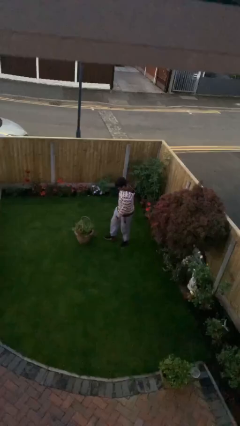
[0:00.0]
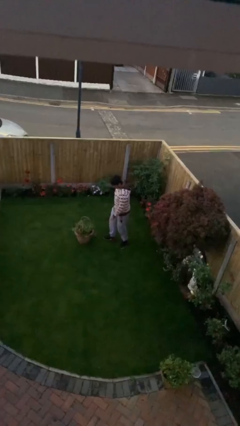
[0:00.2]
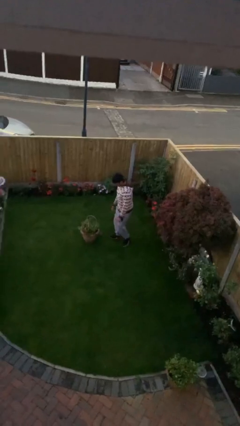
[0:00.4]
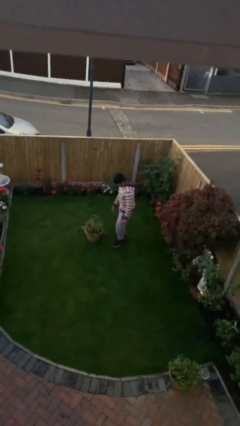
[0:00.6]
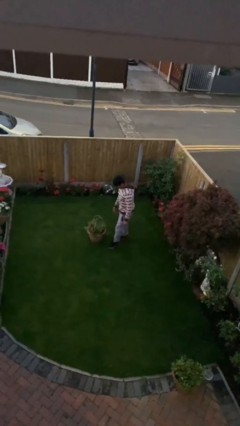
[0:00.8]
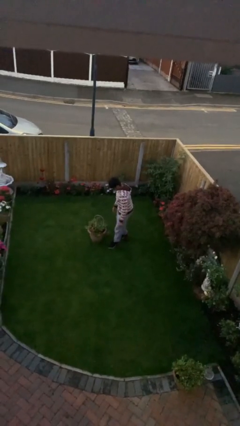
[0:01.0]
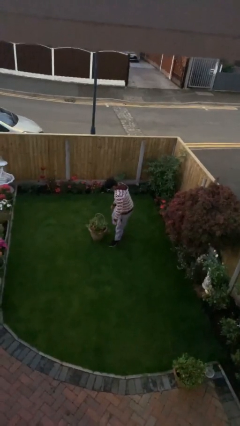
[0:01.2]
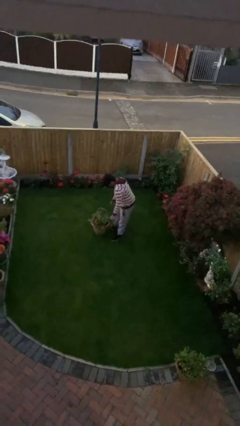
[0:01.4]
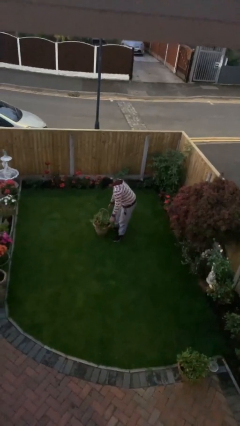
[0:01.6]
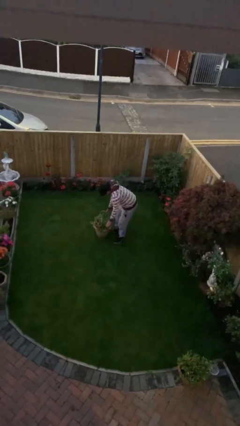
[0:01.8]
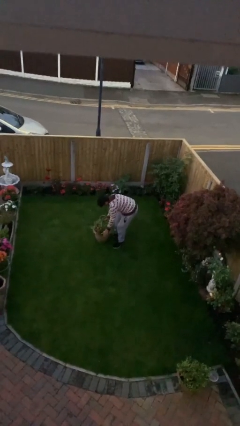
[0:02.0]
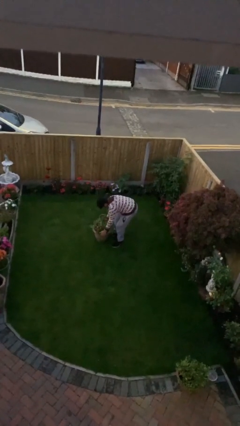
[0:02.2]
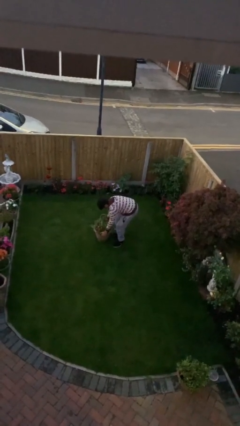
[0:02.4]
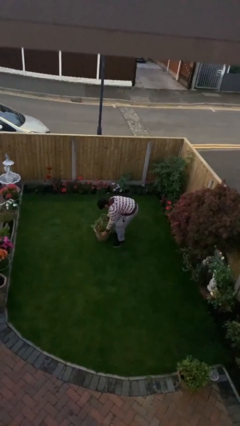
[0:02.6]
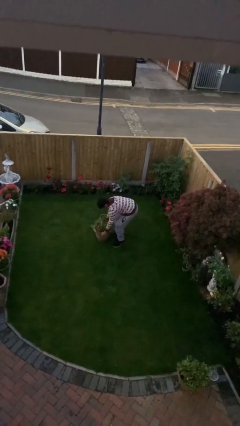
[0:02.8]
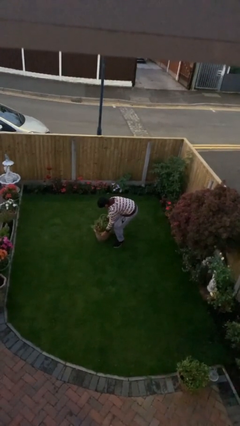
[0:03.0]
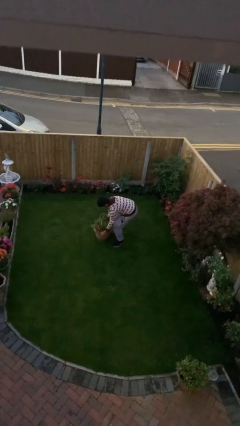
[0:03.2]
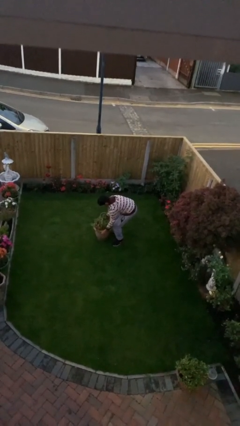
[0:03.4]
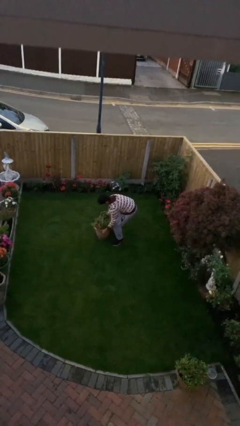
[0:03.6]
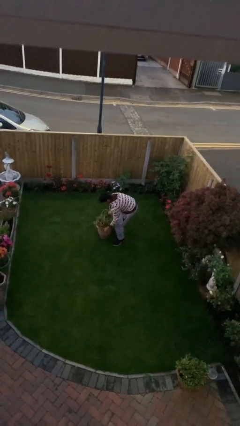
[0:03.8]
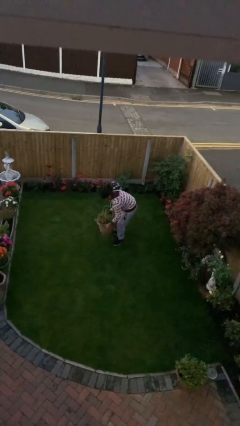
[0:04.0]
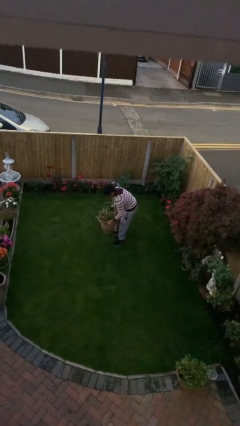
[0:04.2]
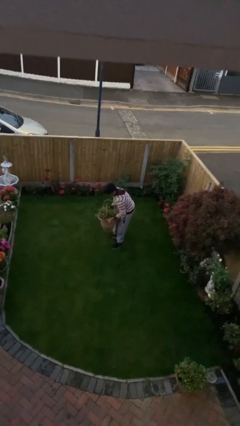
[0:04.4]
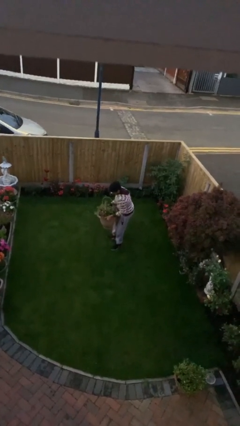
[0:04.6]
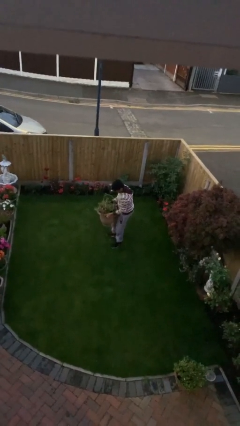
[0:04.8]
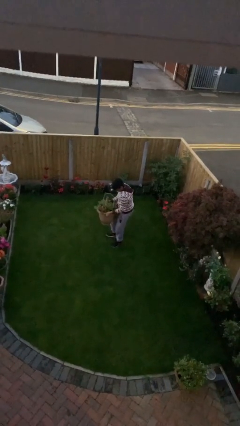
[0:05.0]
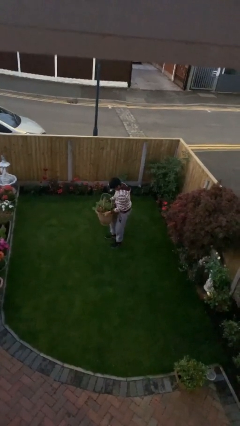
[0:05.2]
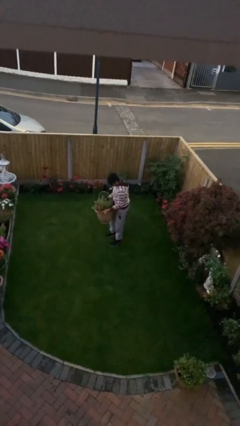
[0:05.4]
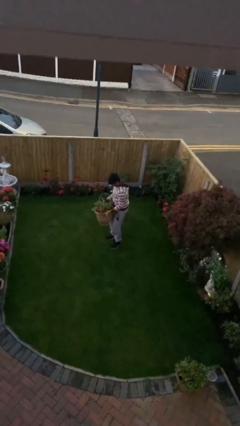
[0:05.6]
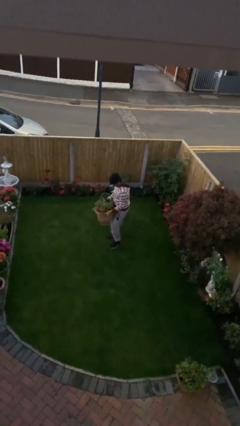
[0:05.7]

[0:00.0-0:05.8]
person picks up object from floor

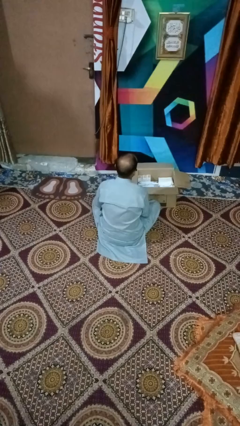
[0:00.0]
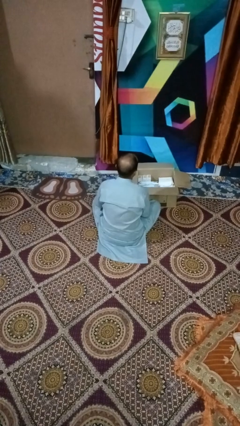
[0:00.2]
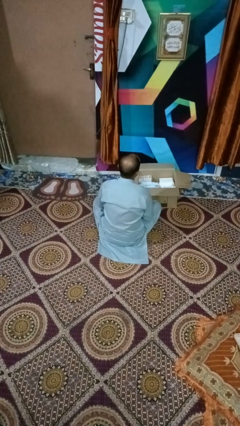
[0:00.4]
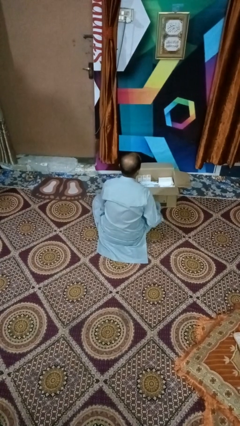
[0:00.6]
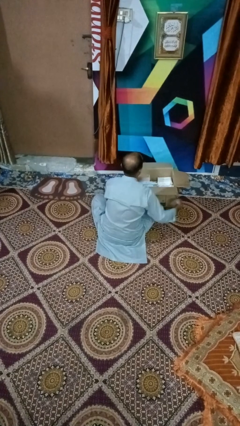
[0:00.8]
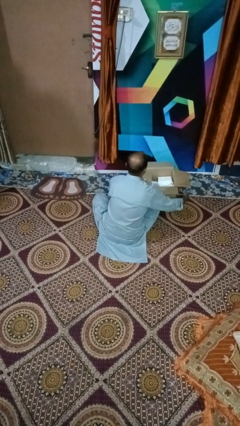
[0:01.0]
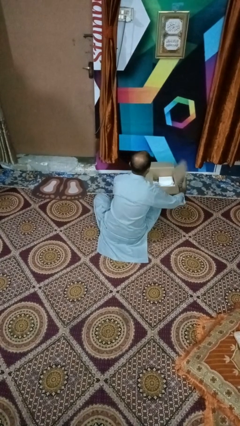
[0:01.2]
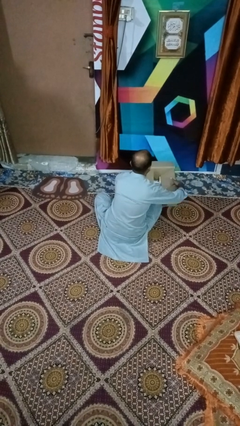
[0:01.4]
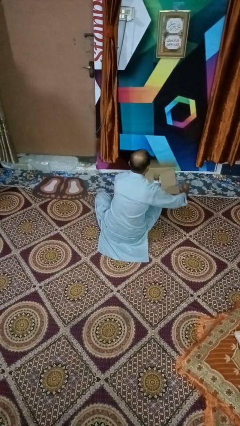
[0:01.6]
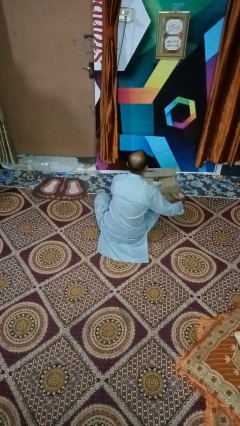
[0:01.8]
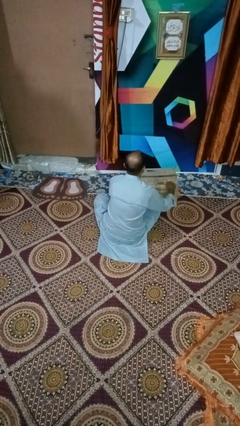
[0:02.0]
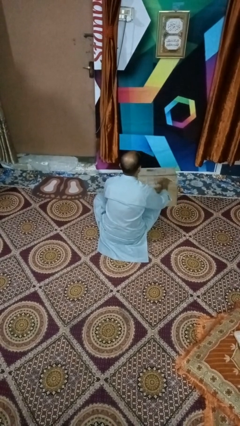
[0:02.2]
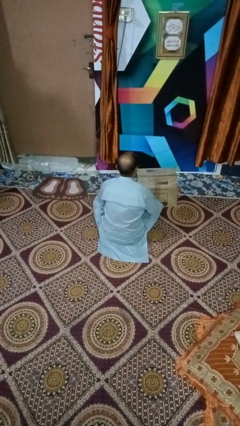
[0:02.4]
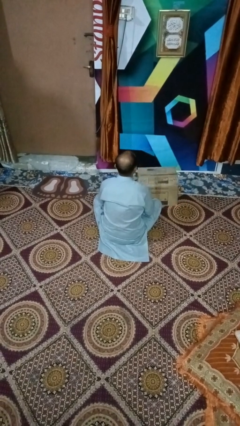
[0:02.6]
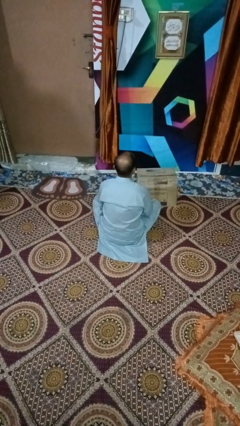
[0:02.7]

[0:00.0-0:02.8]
person closes box

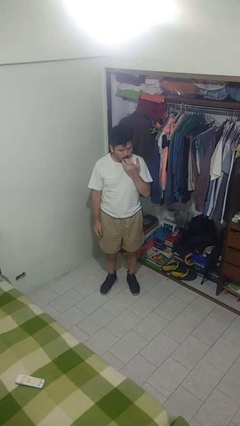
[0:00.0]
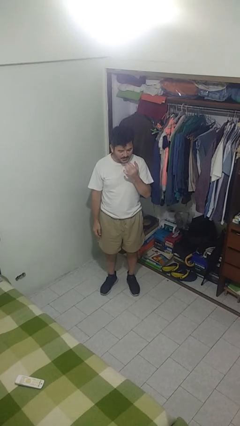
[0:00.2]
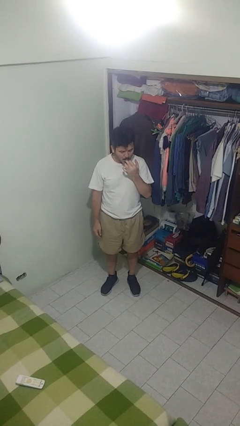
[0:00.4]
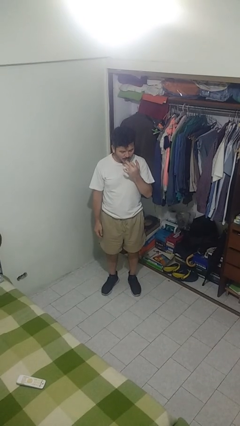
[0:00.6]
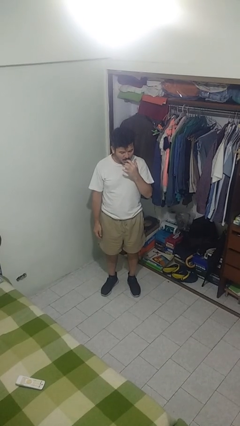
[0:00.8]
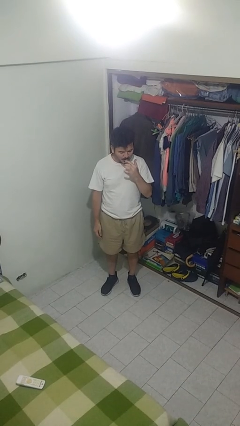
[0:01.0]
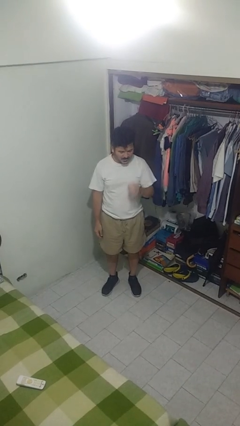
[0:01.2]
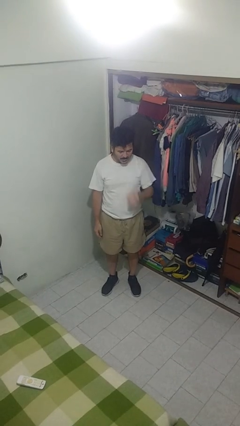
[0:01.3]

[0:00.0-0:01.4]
person licks fingers

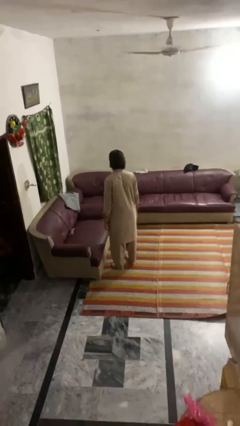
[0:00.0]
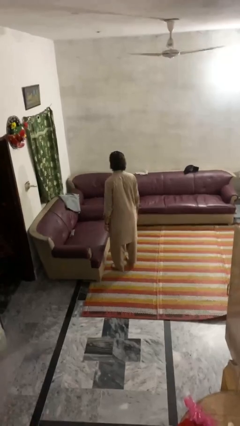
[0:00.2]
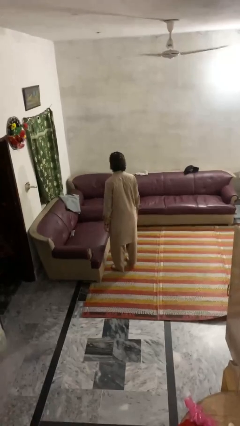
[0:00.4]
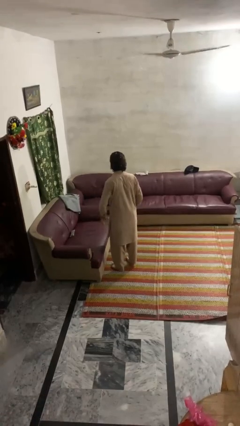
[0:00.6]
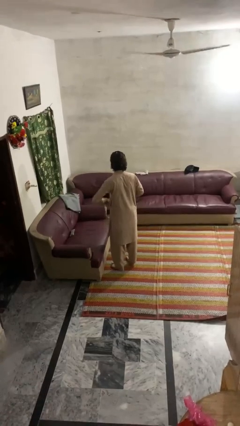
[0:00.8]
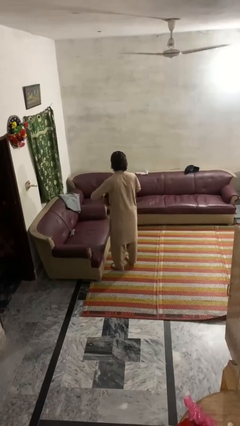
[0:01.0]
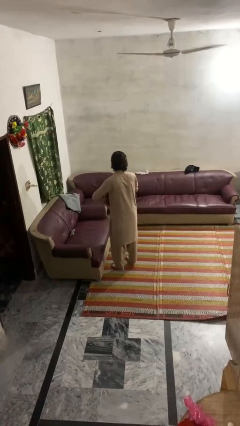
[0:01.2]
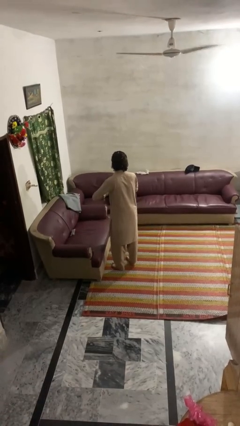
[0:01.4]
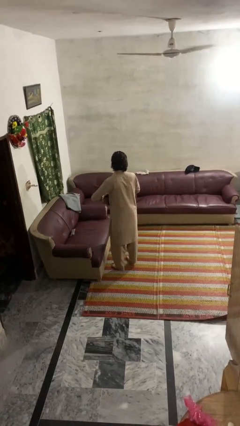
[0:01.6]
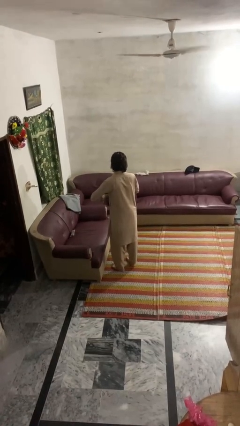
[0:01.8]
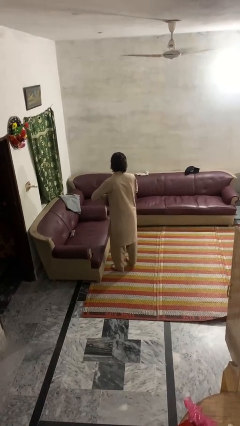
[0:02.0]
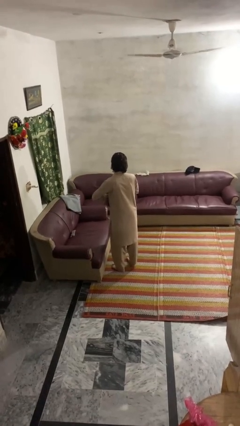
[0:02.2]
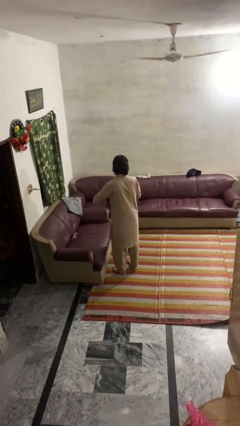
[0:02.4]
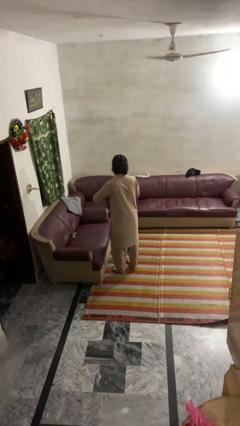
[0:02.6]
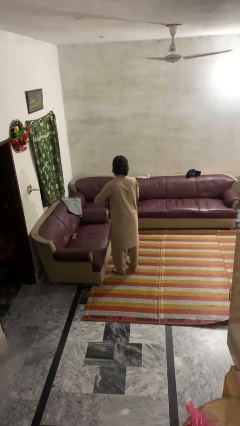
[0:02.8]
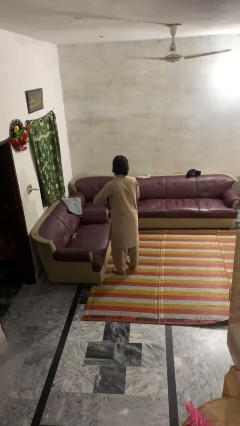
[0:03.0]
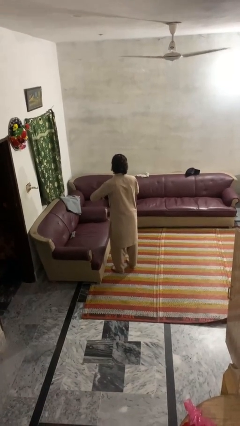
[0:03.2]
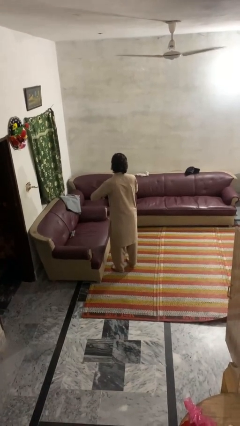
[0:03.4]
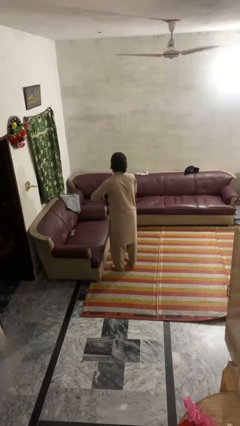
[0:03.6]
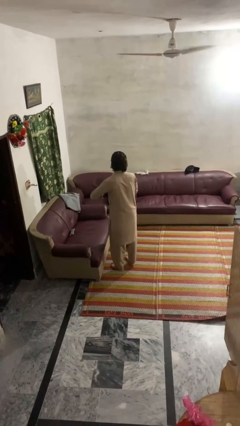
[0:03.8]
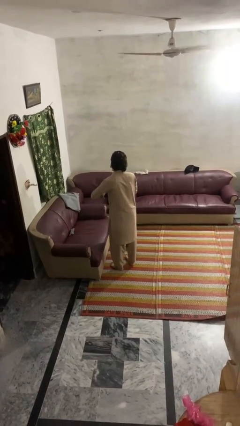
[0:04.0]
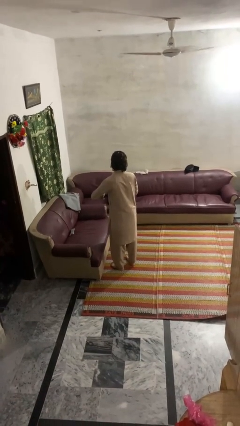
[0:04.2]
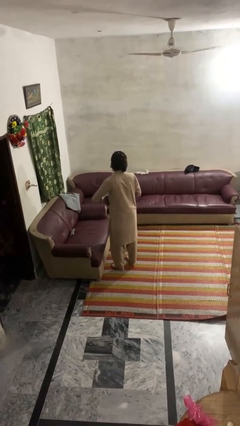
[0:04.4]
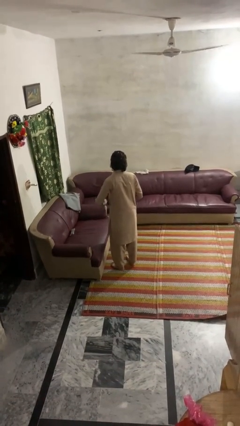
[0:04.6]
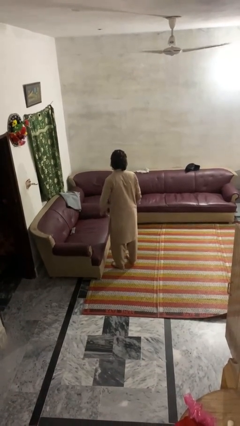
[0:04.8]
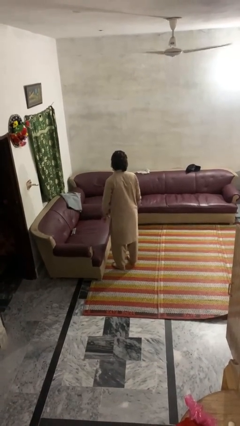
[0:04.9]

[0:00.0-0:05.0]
person cracks knuckles

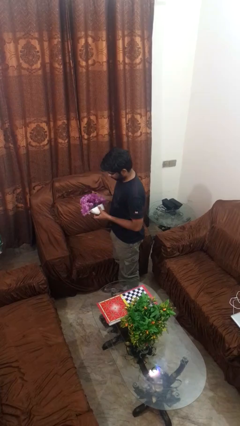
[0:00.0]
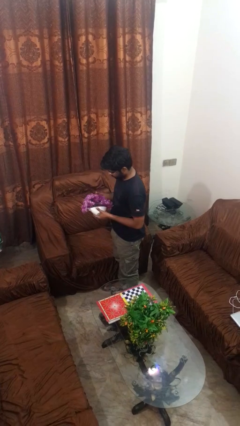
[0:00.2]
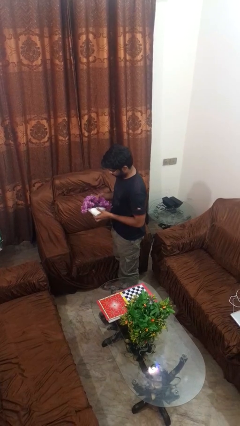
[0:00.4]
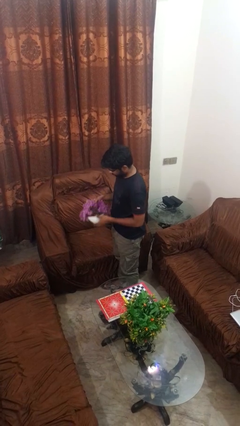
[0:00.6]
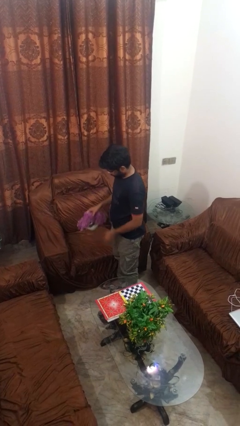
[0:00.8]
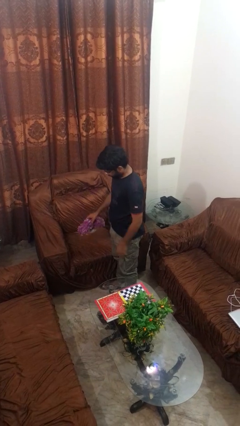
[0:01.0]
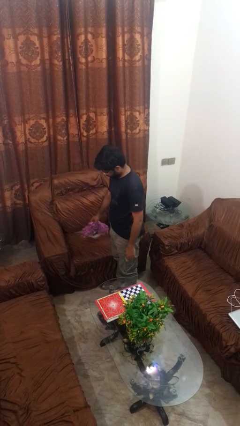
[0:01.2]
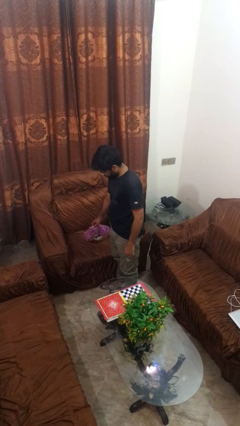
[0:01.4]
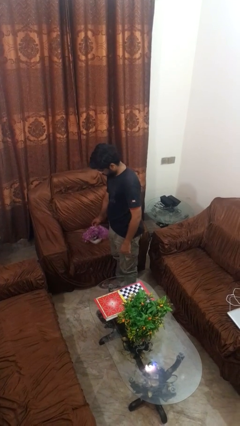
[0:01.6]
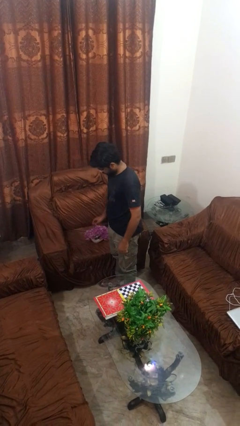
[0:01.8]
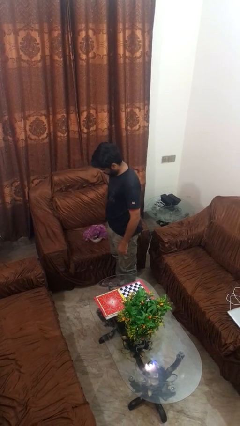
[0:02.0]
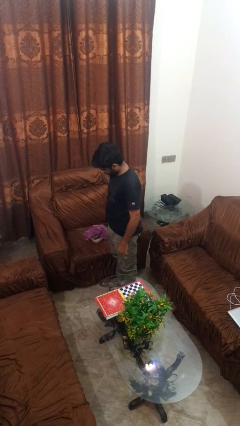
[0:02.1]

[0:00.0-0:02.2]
person puts down object on couch

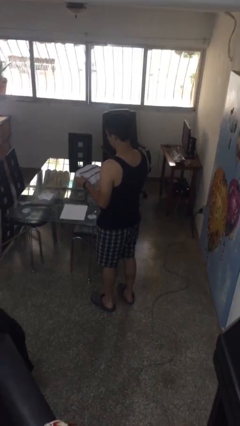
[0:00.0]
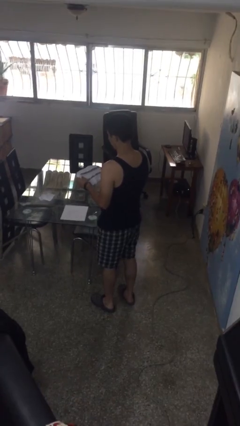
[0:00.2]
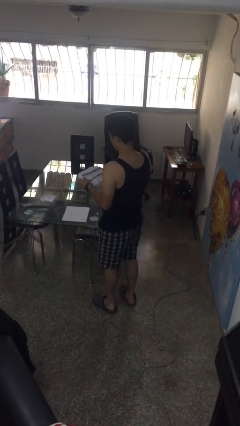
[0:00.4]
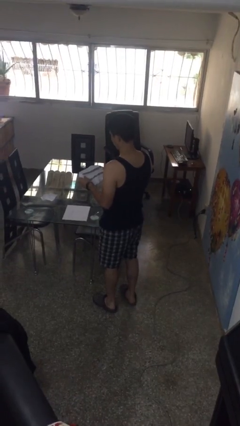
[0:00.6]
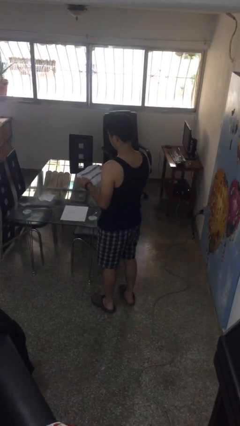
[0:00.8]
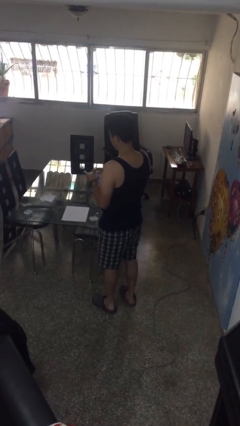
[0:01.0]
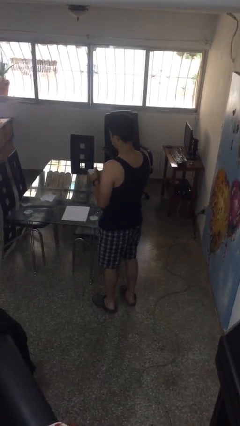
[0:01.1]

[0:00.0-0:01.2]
person crumples paper
